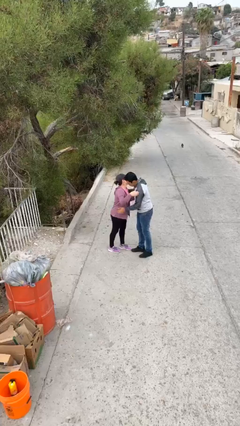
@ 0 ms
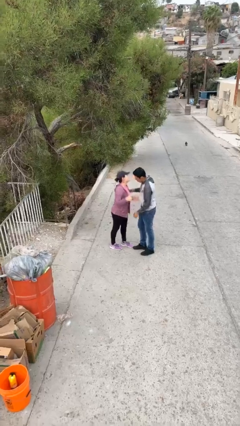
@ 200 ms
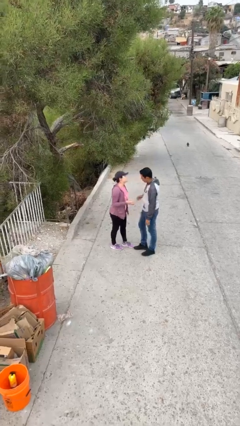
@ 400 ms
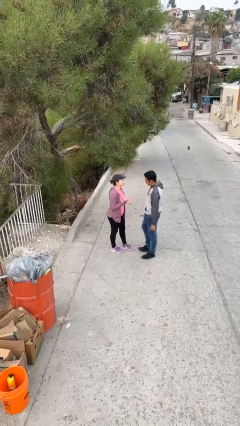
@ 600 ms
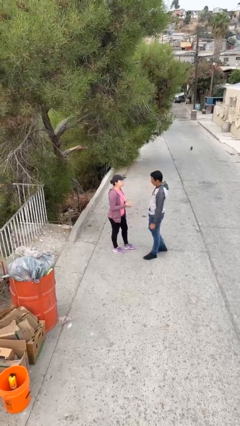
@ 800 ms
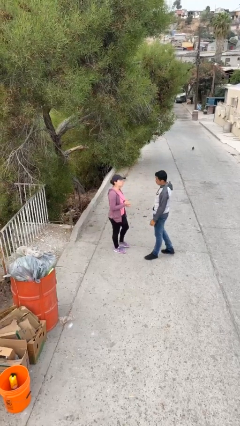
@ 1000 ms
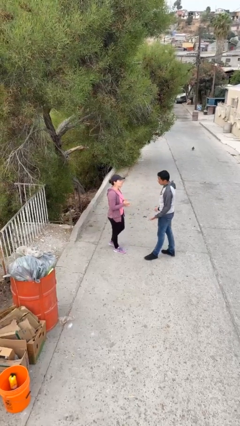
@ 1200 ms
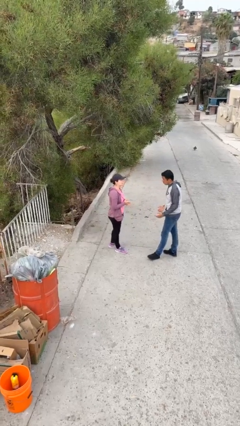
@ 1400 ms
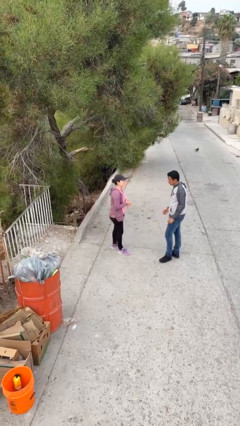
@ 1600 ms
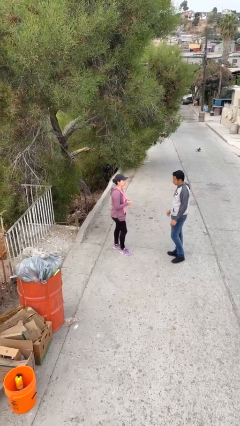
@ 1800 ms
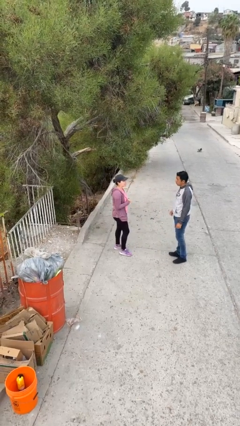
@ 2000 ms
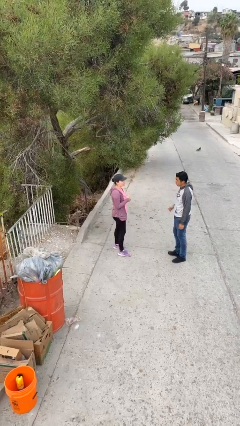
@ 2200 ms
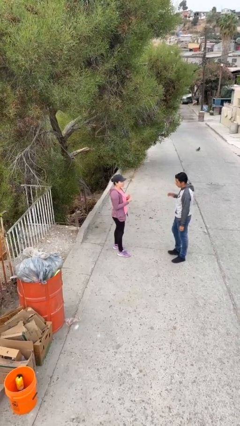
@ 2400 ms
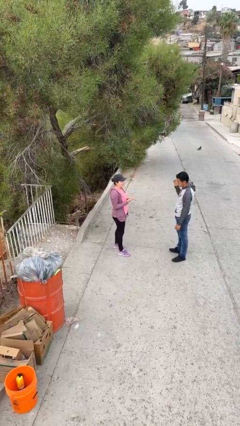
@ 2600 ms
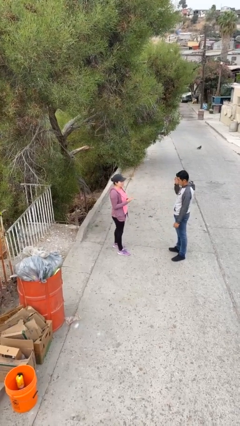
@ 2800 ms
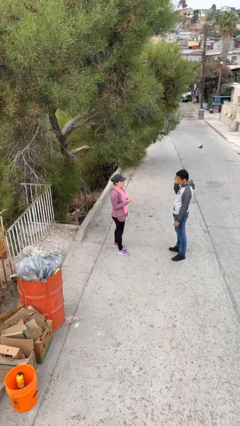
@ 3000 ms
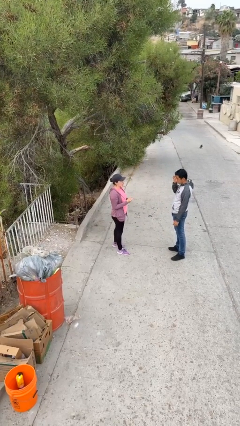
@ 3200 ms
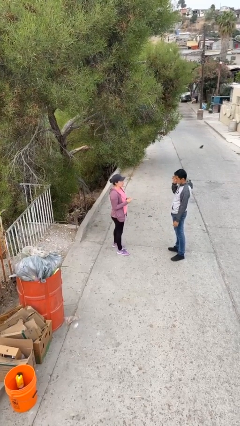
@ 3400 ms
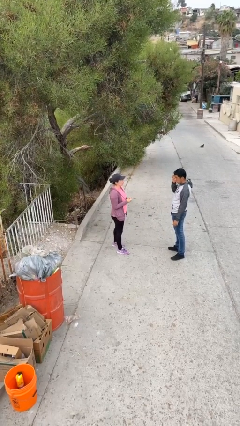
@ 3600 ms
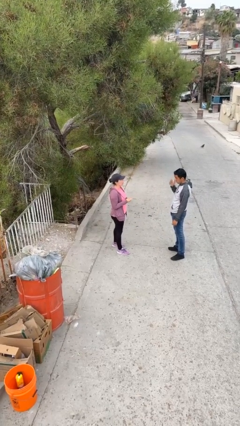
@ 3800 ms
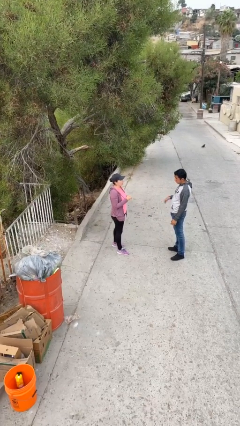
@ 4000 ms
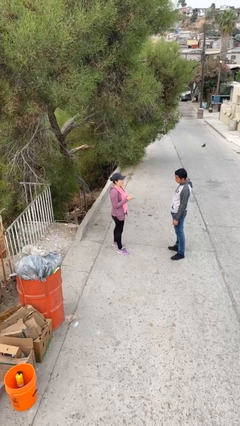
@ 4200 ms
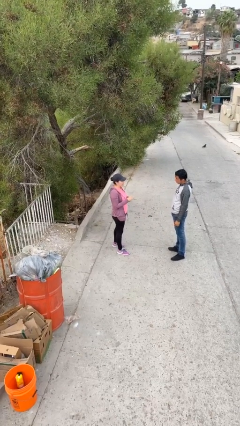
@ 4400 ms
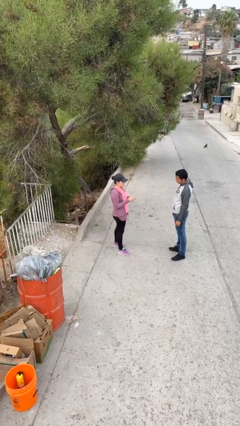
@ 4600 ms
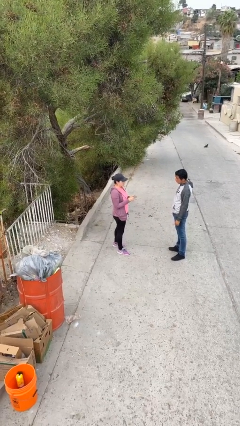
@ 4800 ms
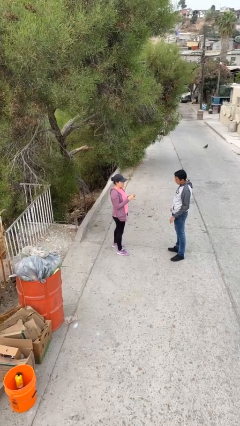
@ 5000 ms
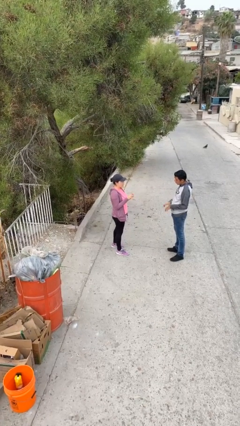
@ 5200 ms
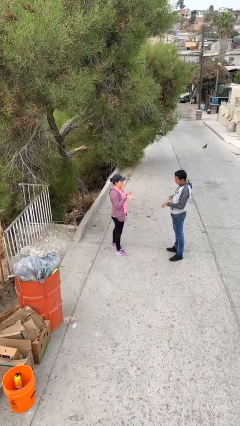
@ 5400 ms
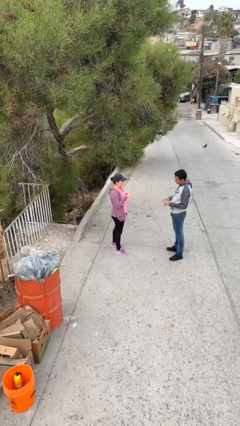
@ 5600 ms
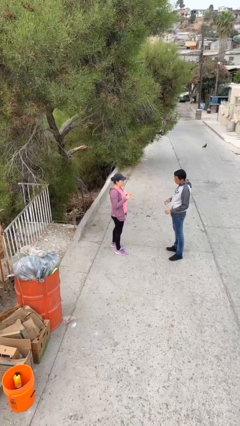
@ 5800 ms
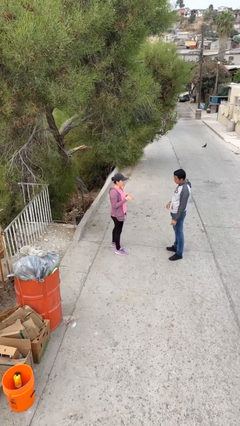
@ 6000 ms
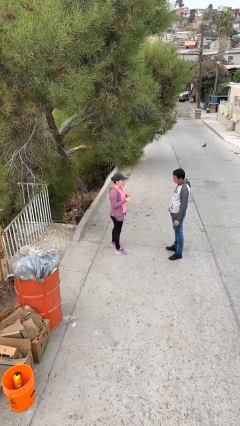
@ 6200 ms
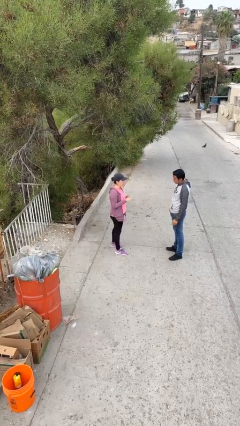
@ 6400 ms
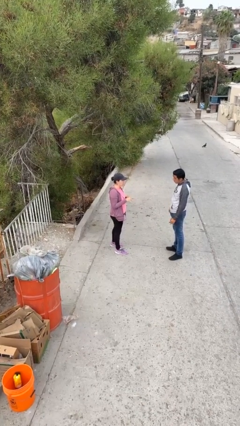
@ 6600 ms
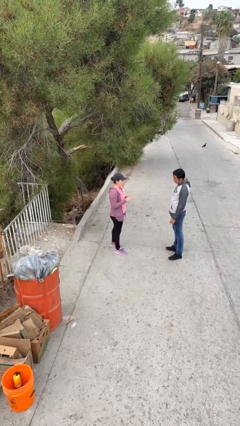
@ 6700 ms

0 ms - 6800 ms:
person talks to person

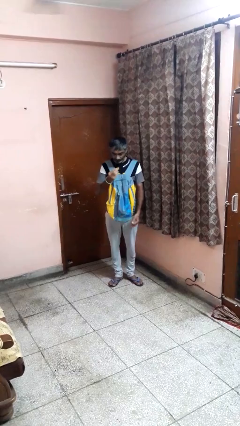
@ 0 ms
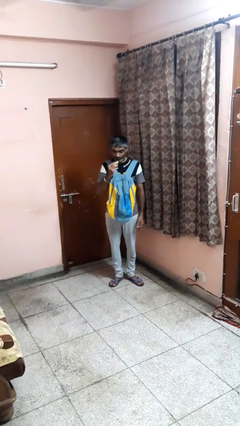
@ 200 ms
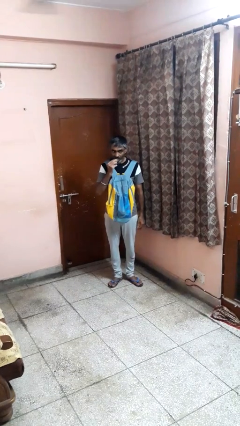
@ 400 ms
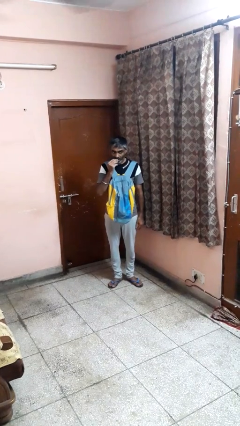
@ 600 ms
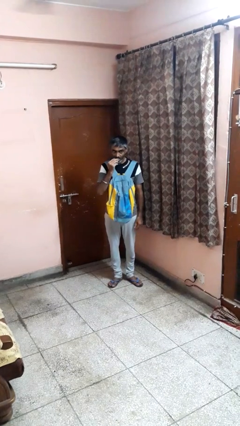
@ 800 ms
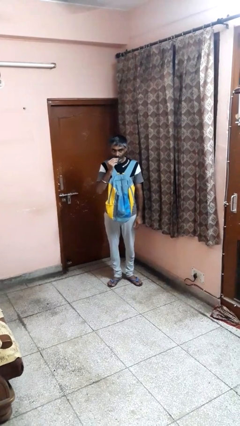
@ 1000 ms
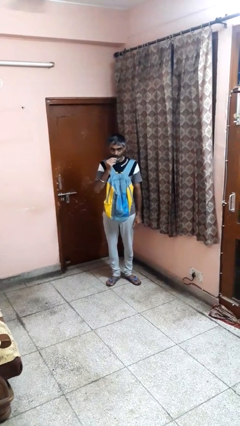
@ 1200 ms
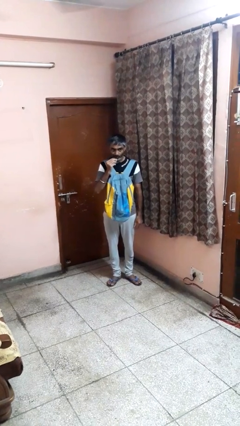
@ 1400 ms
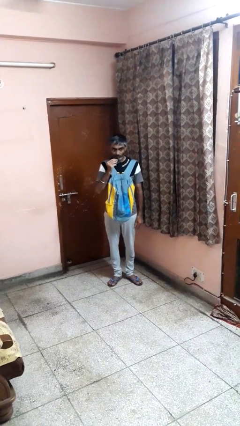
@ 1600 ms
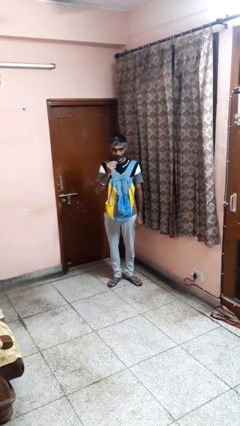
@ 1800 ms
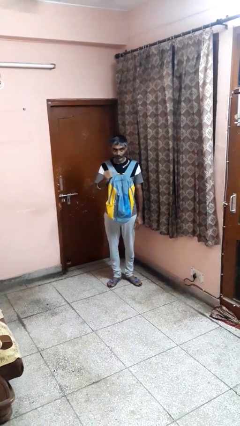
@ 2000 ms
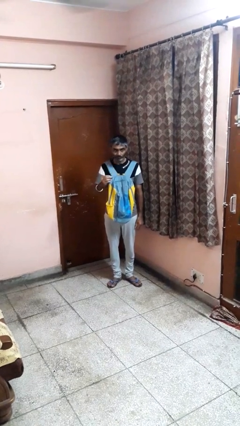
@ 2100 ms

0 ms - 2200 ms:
person eats snack from bag

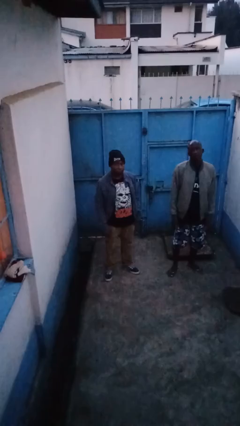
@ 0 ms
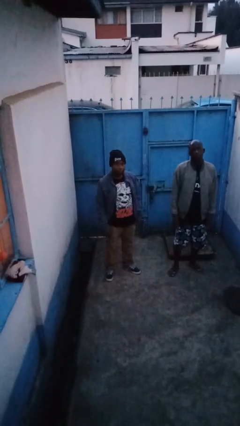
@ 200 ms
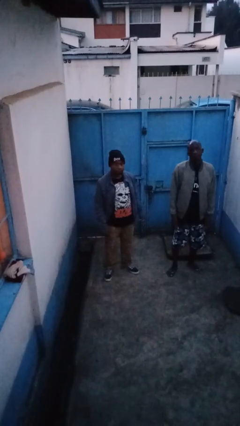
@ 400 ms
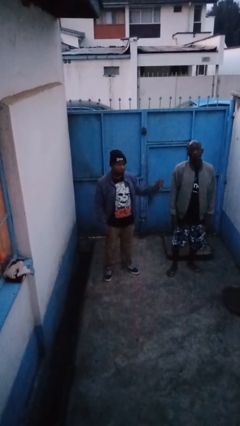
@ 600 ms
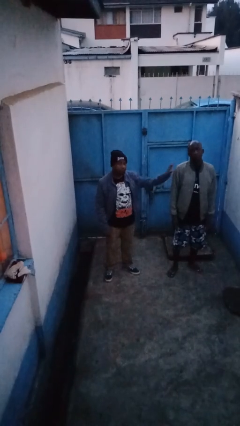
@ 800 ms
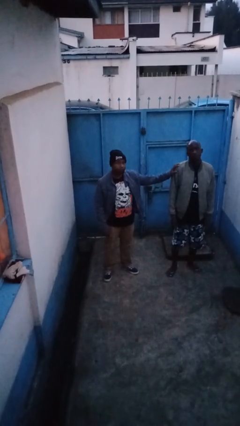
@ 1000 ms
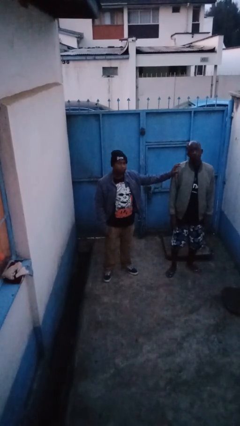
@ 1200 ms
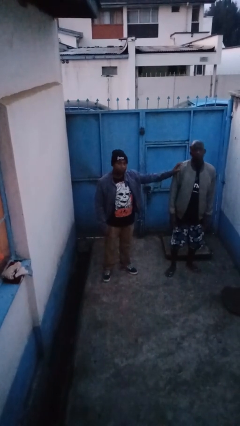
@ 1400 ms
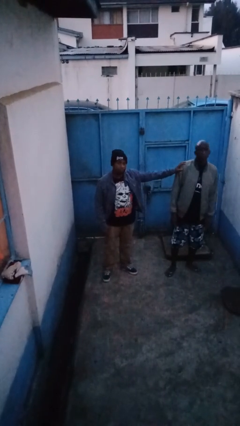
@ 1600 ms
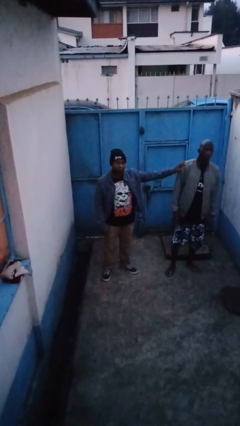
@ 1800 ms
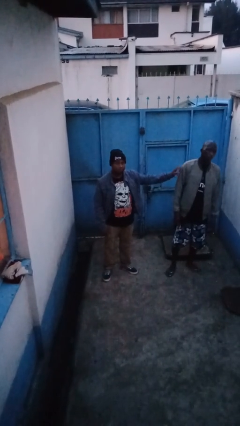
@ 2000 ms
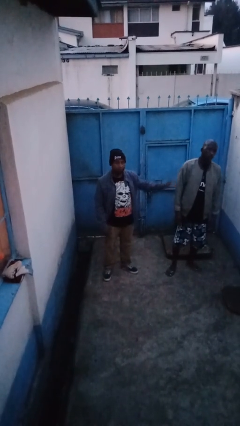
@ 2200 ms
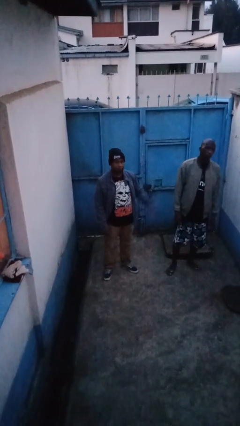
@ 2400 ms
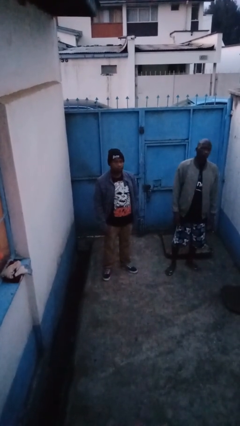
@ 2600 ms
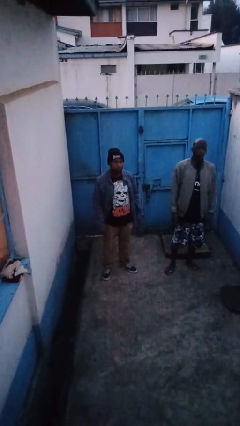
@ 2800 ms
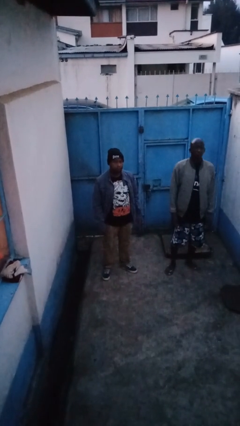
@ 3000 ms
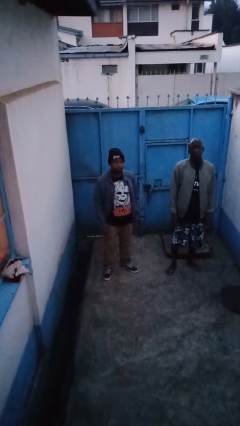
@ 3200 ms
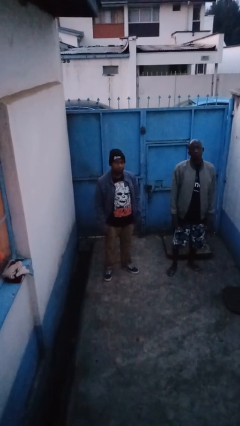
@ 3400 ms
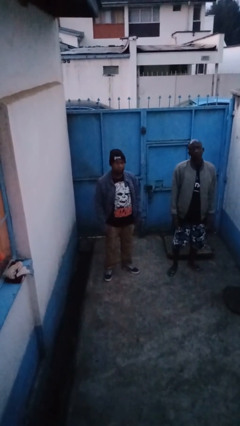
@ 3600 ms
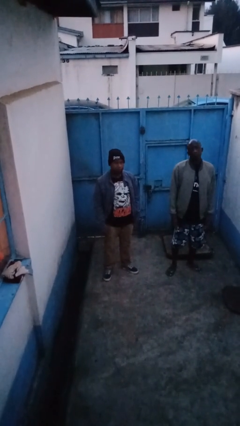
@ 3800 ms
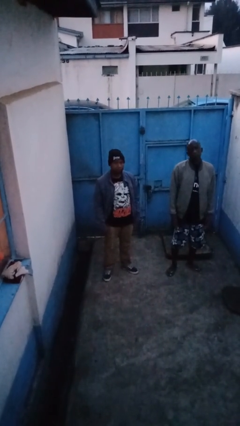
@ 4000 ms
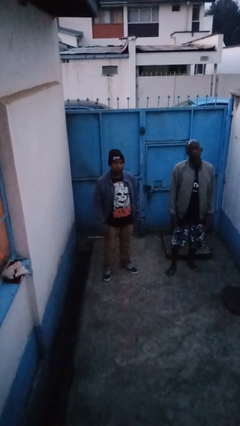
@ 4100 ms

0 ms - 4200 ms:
person shoves person

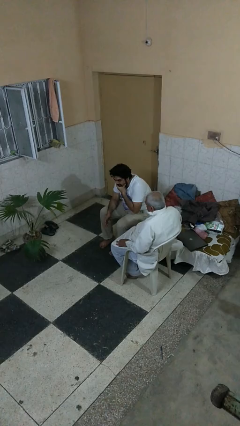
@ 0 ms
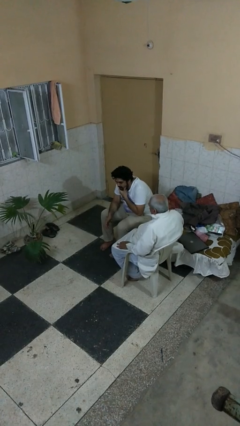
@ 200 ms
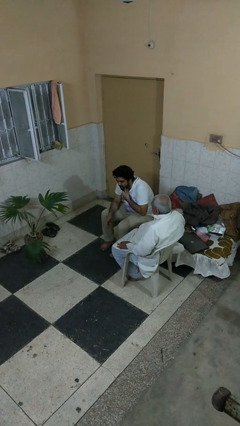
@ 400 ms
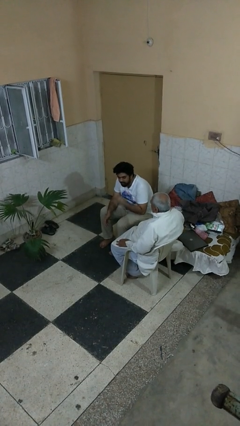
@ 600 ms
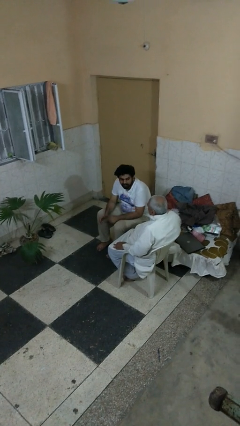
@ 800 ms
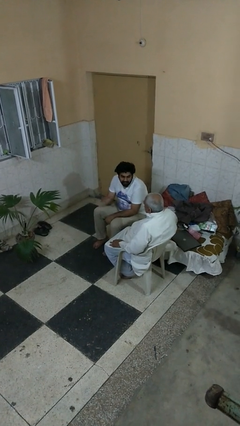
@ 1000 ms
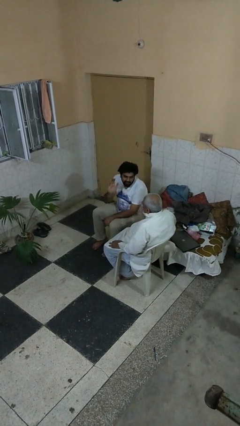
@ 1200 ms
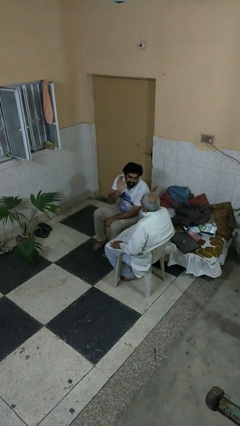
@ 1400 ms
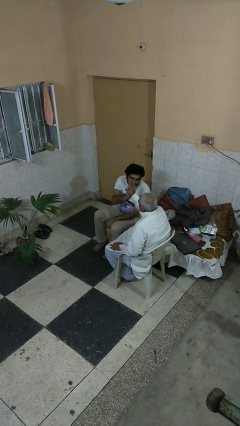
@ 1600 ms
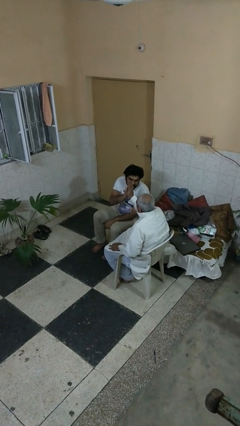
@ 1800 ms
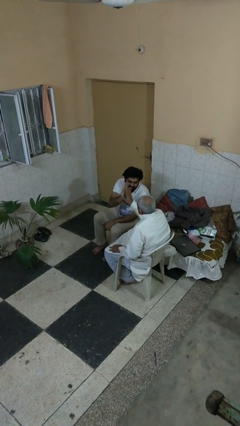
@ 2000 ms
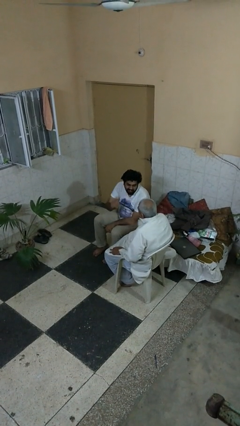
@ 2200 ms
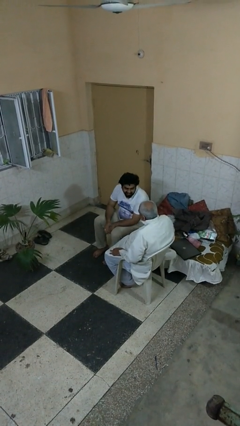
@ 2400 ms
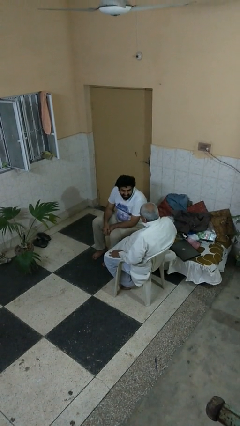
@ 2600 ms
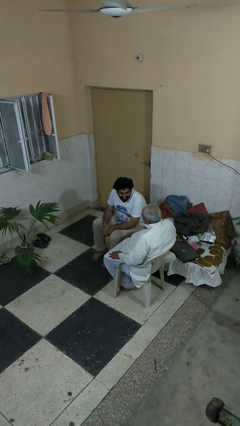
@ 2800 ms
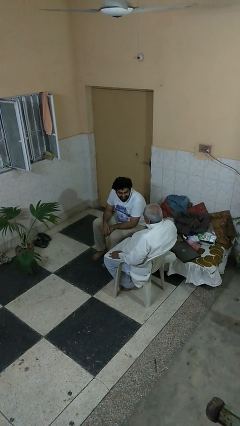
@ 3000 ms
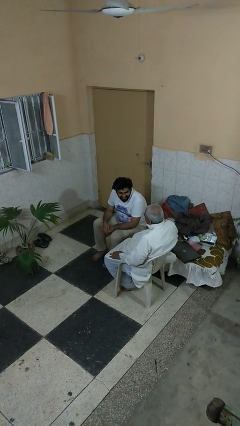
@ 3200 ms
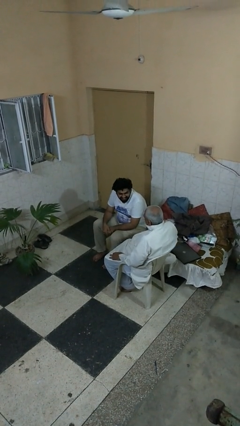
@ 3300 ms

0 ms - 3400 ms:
person highfives hand

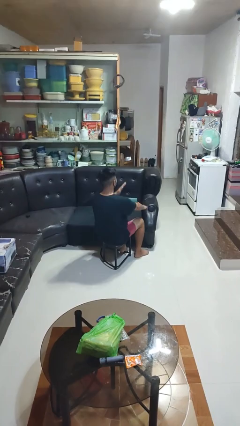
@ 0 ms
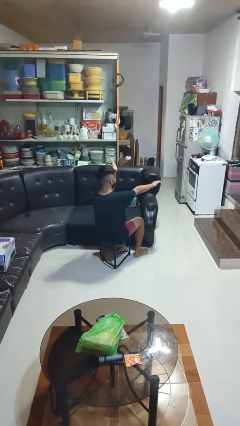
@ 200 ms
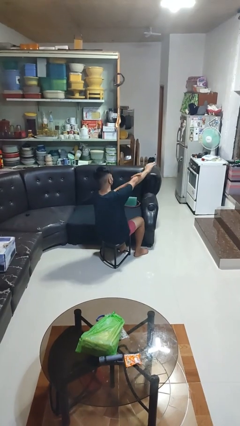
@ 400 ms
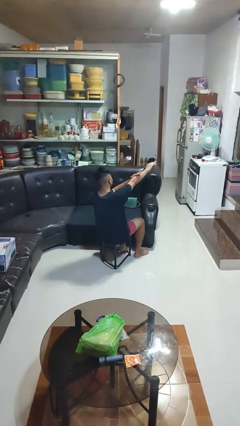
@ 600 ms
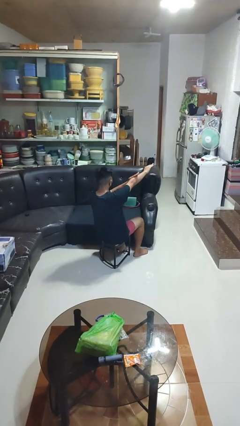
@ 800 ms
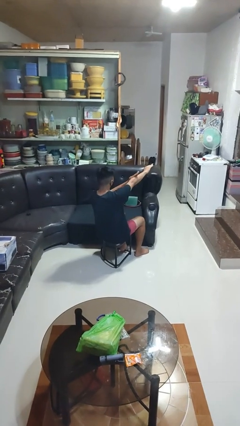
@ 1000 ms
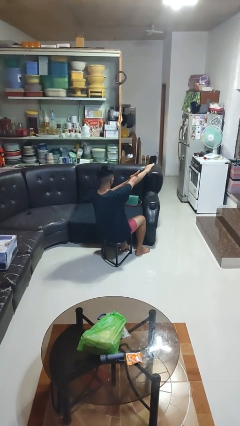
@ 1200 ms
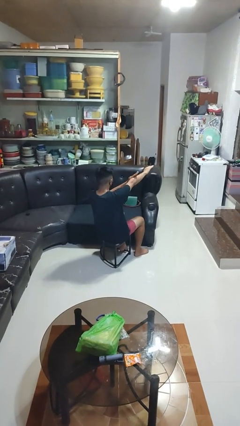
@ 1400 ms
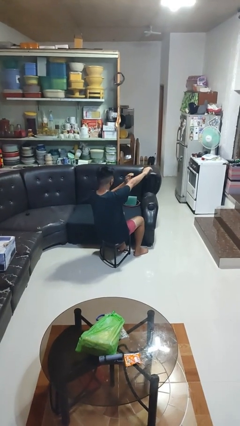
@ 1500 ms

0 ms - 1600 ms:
person swats bug
